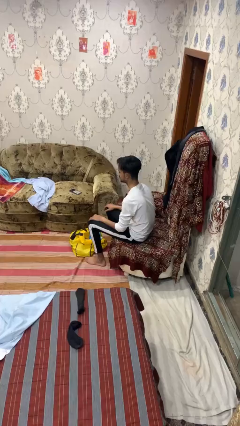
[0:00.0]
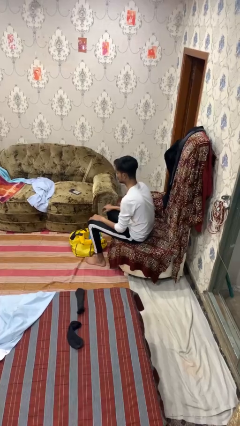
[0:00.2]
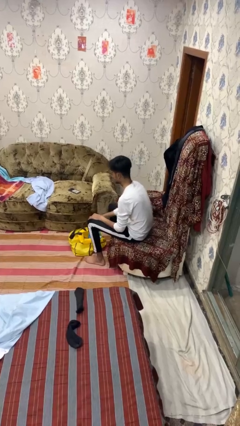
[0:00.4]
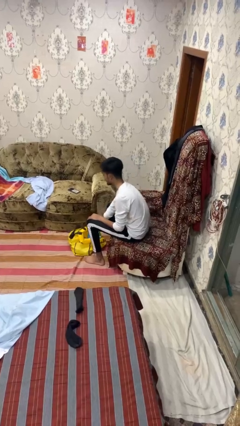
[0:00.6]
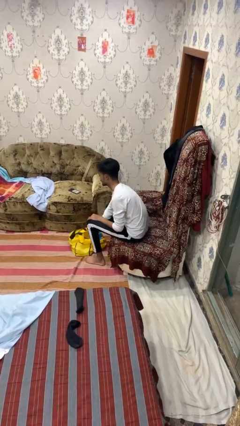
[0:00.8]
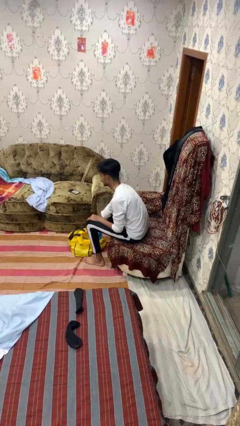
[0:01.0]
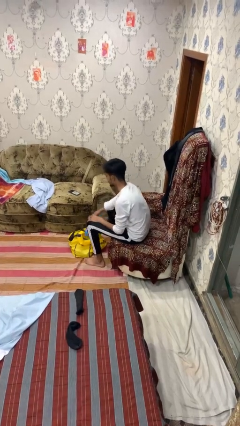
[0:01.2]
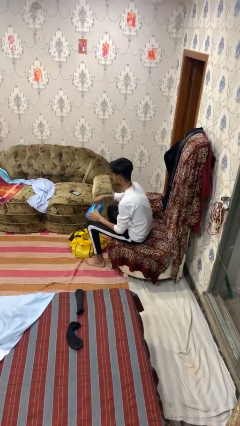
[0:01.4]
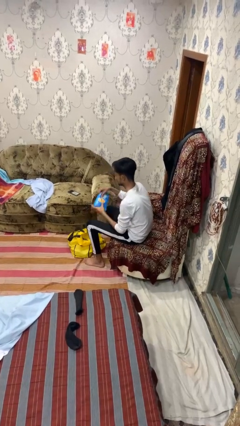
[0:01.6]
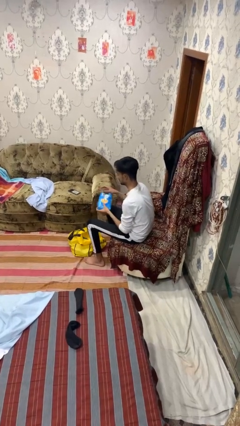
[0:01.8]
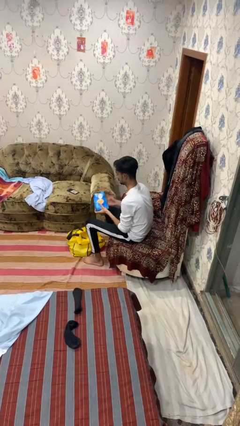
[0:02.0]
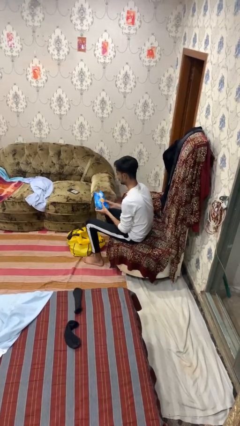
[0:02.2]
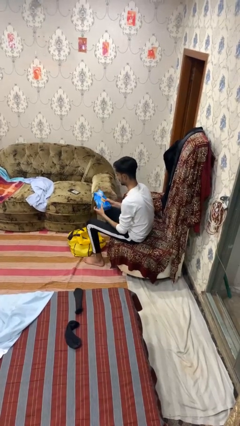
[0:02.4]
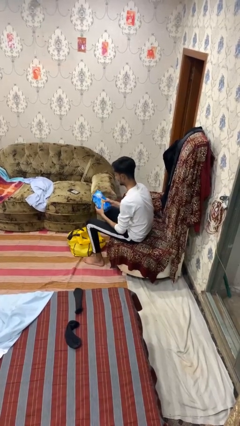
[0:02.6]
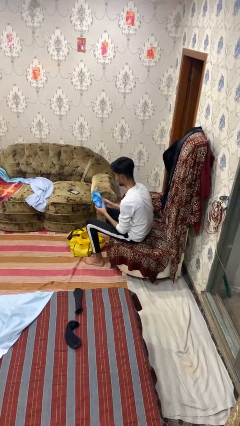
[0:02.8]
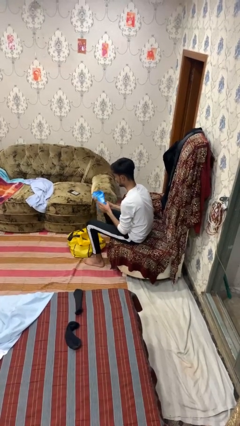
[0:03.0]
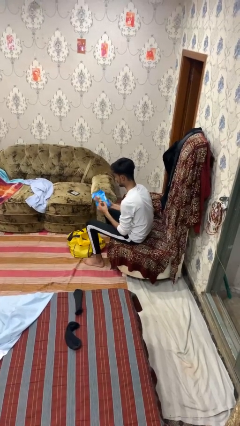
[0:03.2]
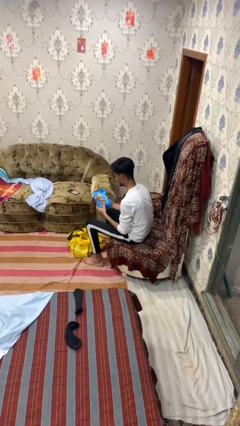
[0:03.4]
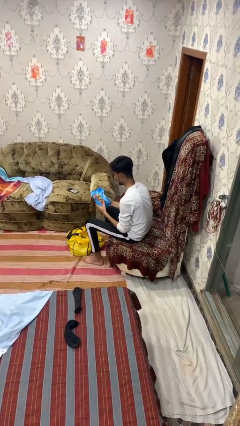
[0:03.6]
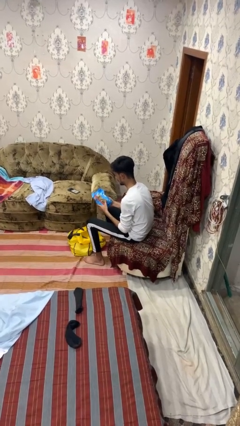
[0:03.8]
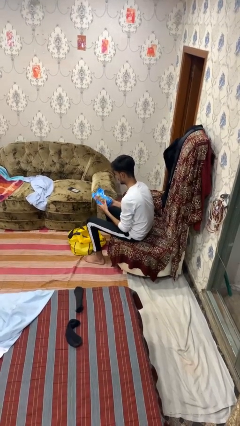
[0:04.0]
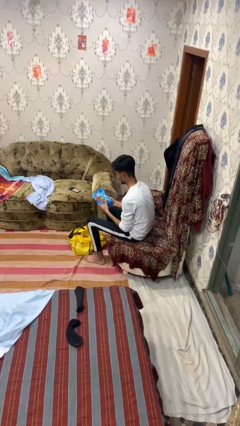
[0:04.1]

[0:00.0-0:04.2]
person takes object from bag

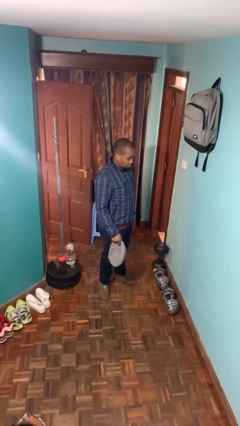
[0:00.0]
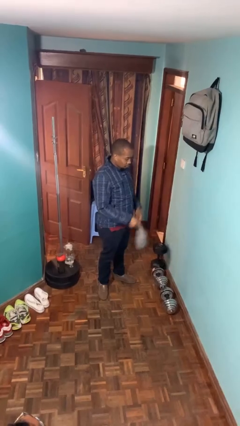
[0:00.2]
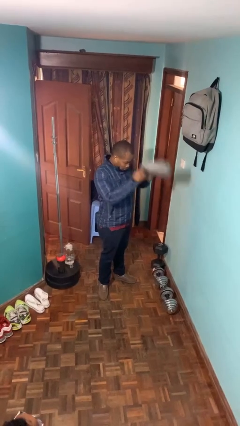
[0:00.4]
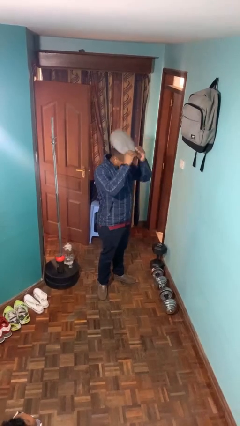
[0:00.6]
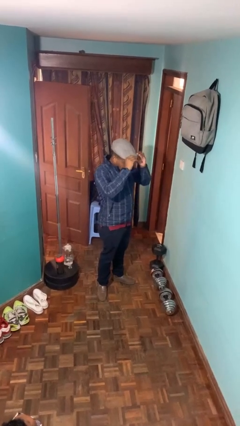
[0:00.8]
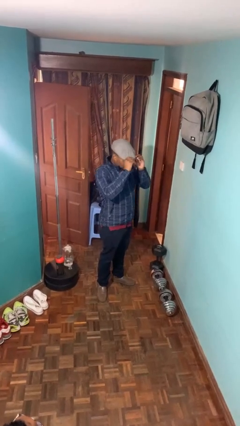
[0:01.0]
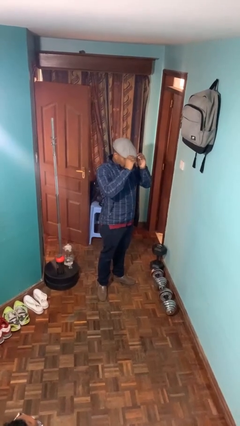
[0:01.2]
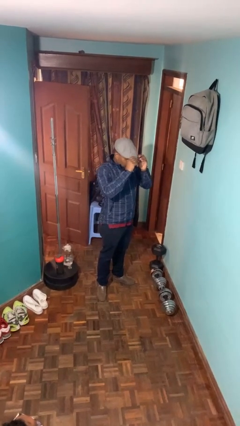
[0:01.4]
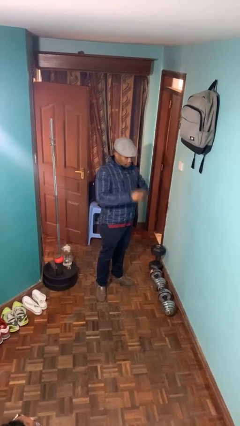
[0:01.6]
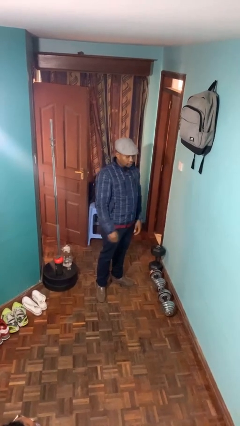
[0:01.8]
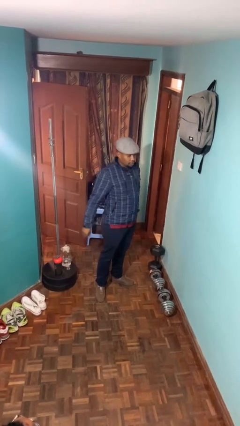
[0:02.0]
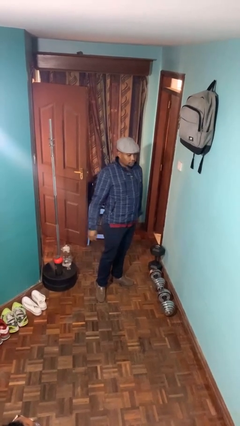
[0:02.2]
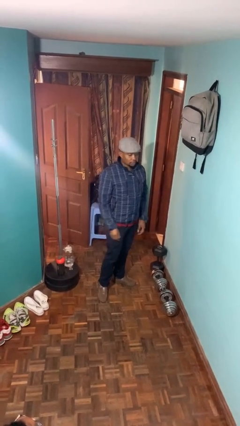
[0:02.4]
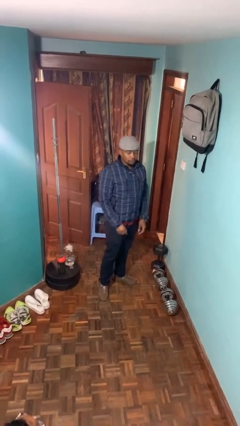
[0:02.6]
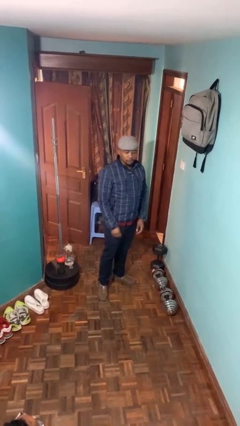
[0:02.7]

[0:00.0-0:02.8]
person puts on hat

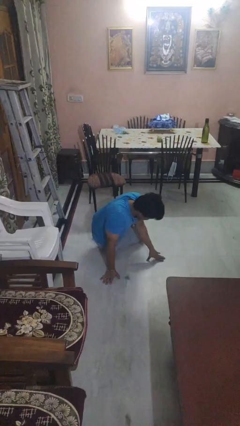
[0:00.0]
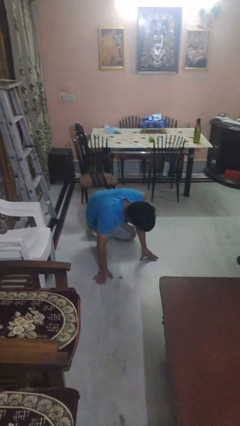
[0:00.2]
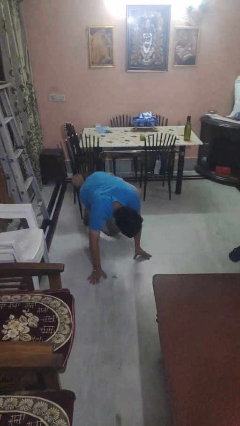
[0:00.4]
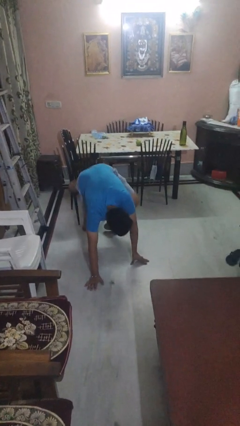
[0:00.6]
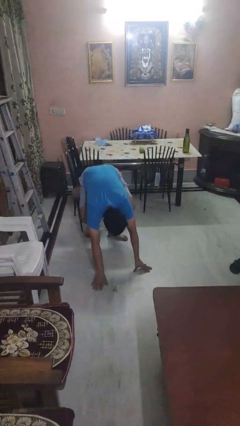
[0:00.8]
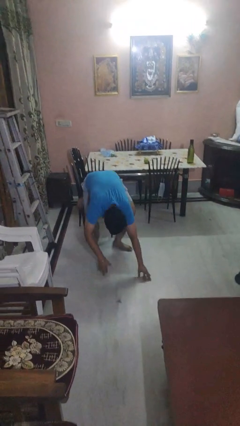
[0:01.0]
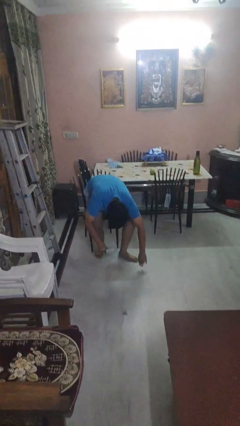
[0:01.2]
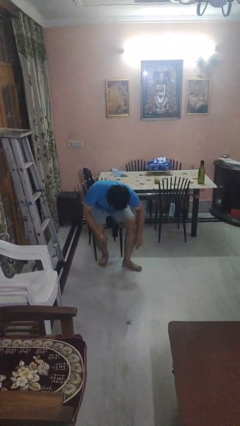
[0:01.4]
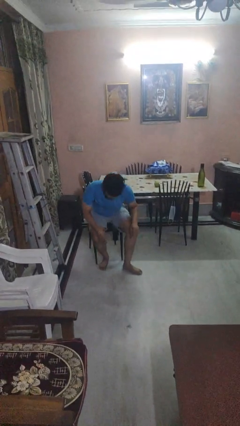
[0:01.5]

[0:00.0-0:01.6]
person stands up from floor

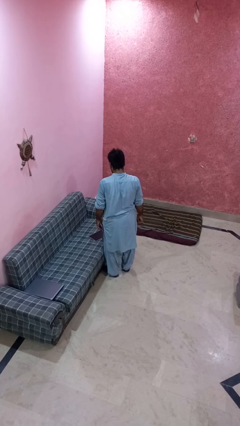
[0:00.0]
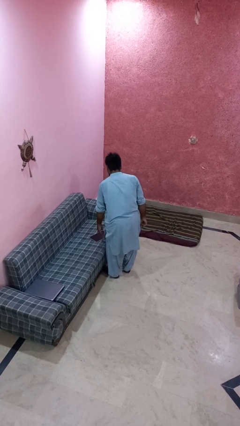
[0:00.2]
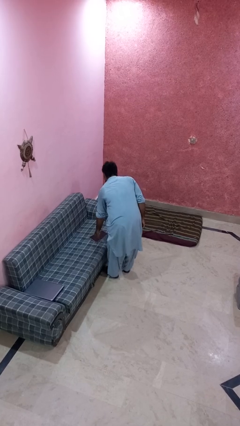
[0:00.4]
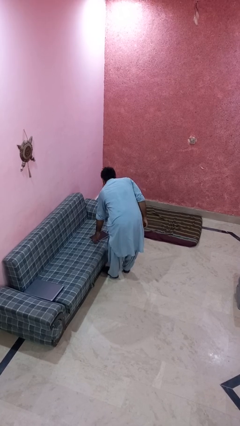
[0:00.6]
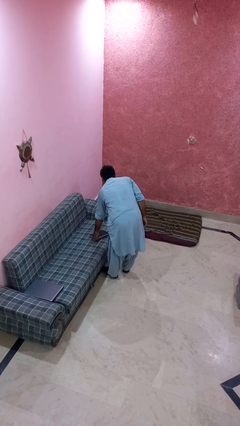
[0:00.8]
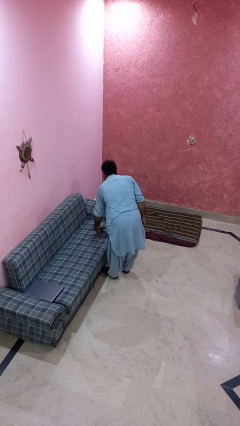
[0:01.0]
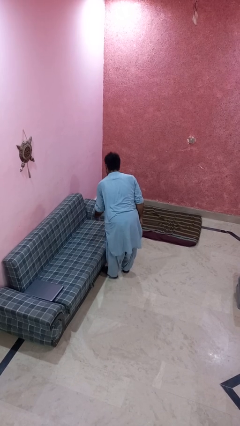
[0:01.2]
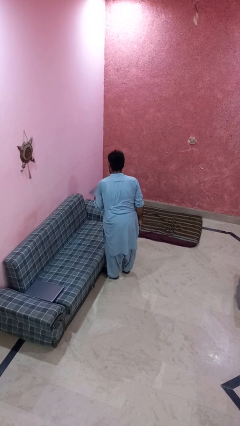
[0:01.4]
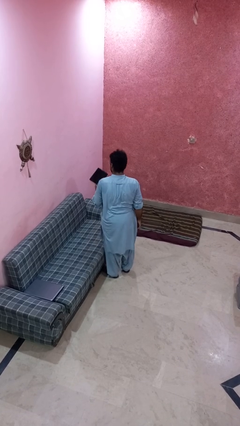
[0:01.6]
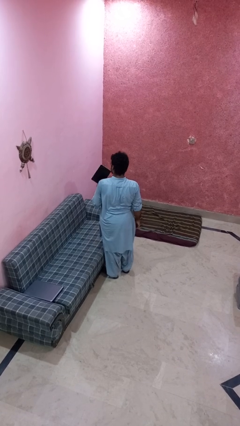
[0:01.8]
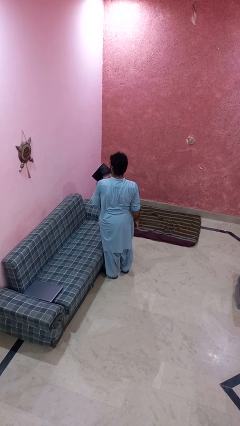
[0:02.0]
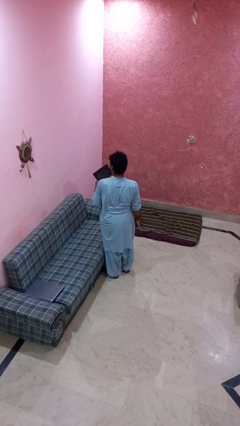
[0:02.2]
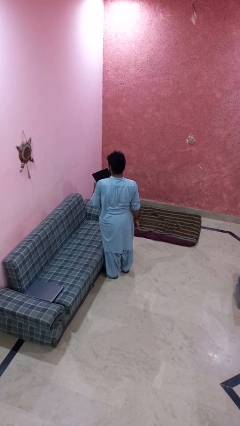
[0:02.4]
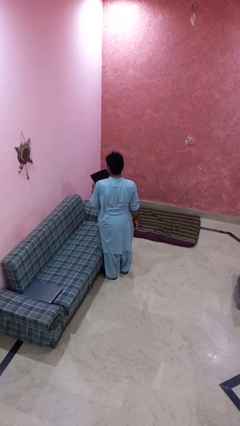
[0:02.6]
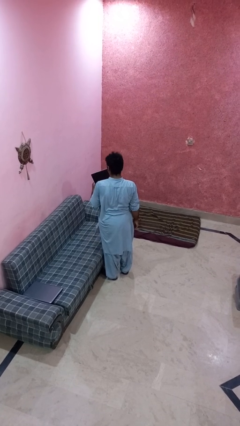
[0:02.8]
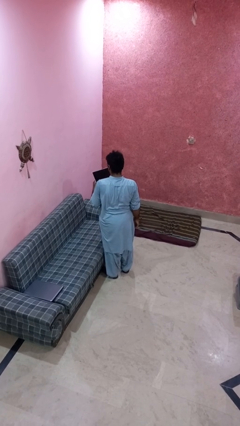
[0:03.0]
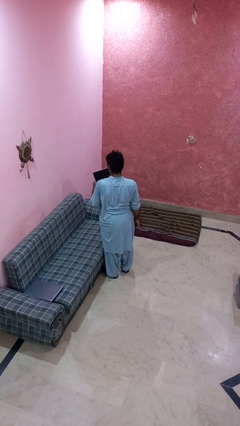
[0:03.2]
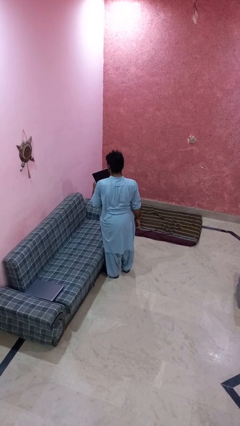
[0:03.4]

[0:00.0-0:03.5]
person picks up object from couch

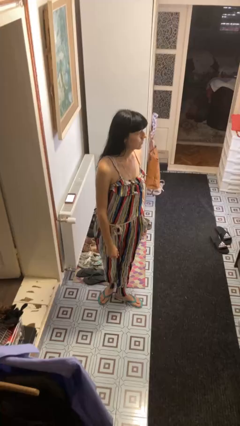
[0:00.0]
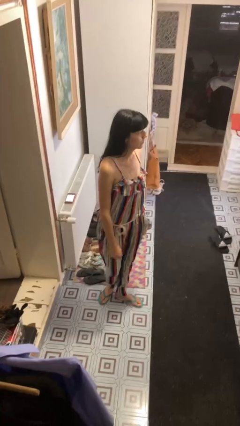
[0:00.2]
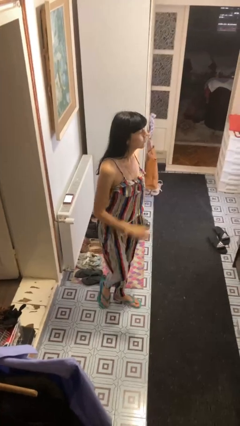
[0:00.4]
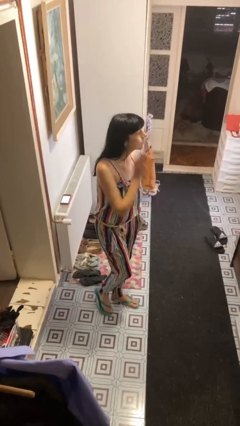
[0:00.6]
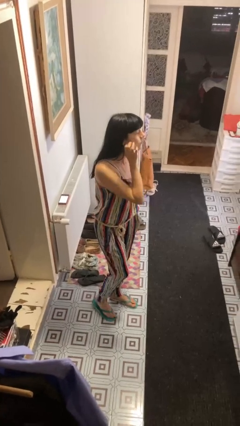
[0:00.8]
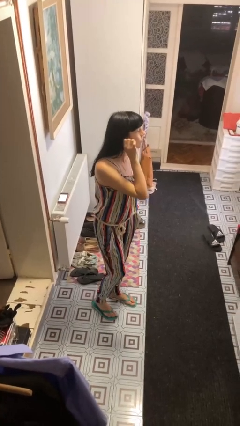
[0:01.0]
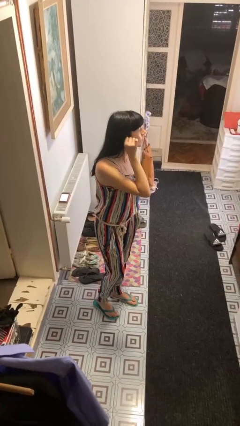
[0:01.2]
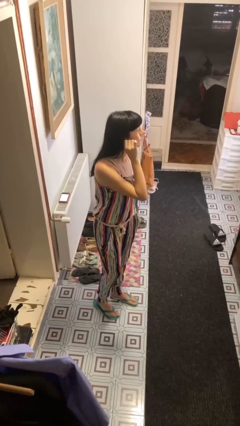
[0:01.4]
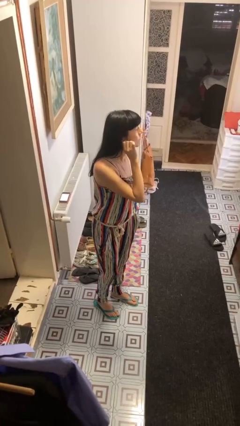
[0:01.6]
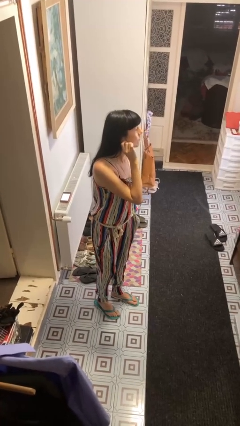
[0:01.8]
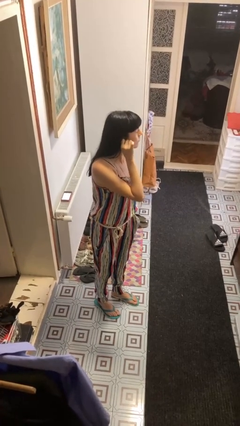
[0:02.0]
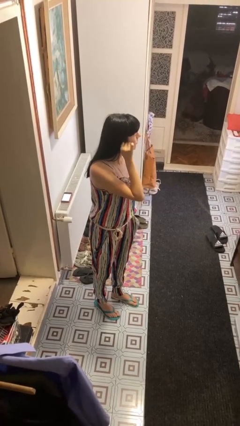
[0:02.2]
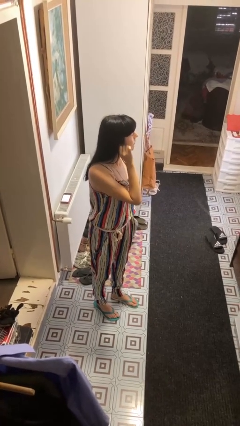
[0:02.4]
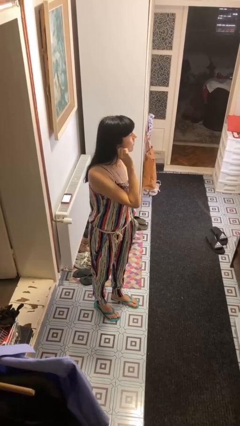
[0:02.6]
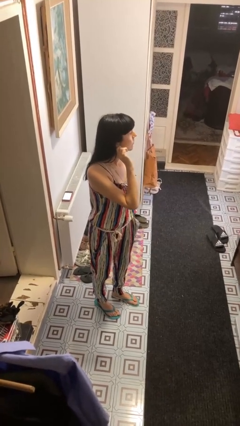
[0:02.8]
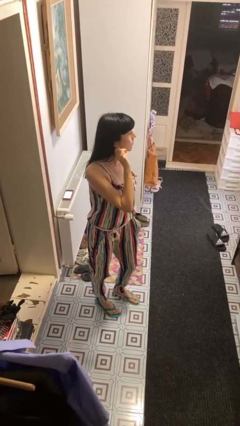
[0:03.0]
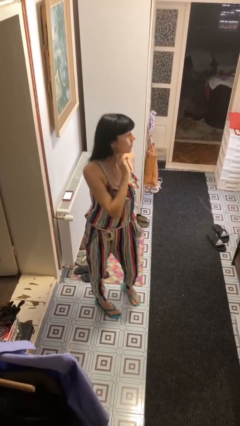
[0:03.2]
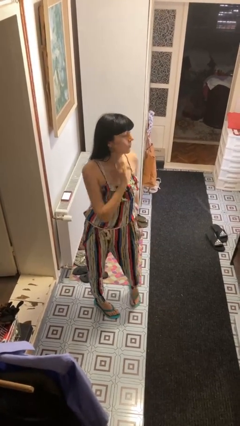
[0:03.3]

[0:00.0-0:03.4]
person touches earlobe

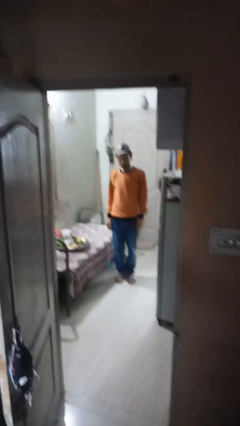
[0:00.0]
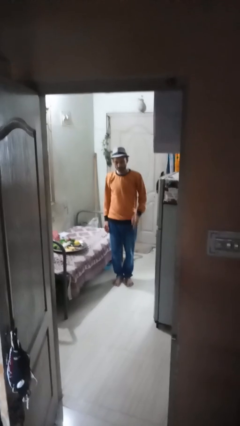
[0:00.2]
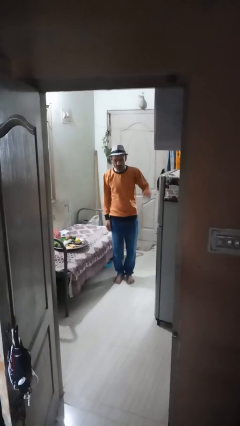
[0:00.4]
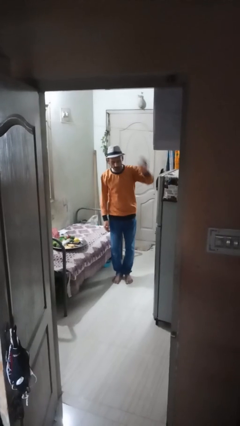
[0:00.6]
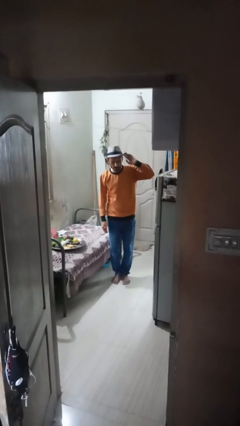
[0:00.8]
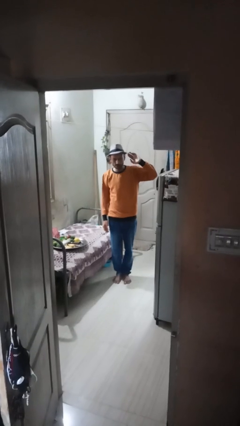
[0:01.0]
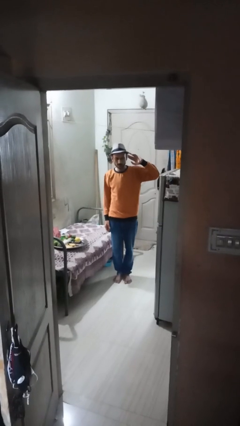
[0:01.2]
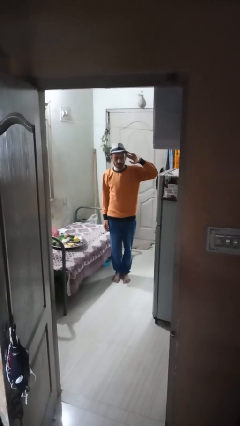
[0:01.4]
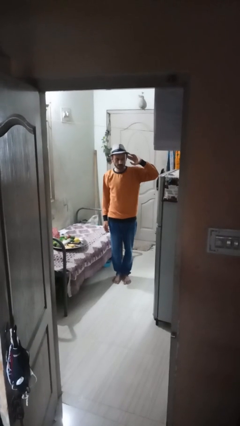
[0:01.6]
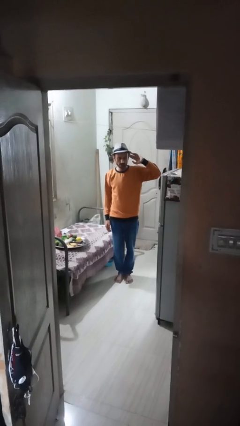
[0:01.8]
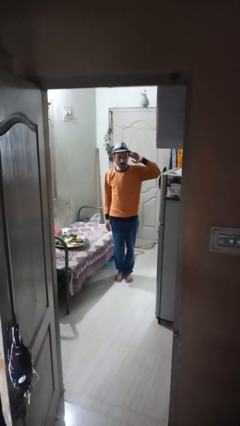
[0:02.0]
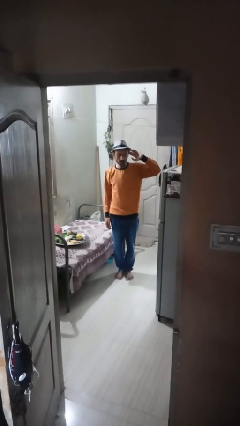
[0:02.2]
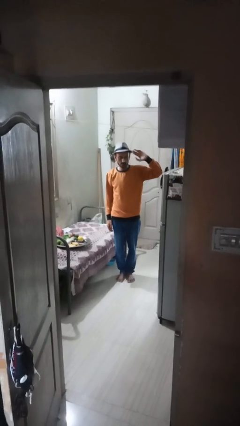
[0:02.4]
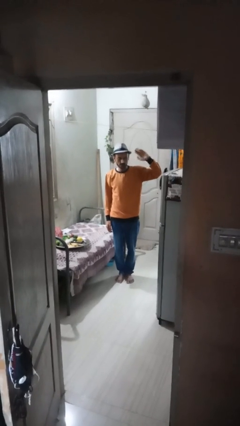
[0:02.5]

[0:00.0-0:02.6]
person salutes
